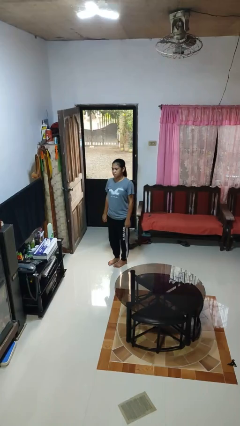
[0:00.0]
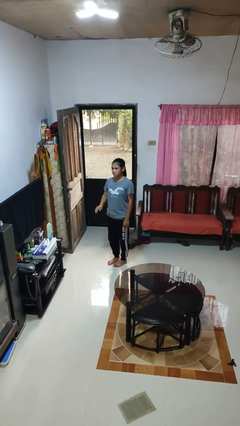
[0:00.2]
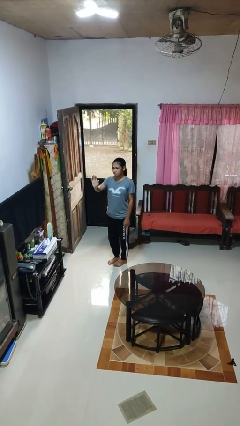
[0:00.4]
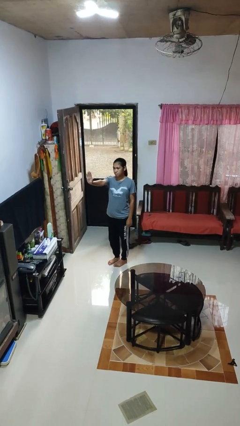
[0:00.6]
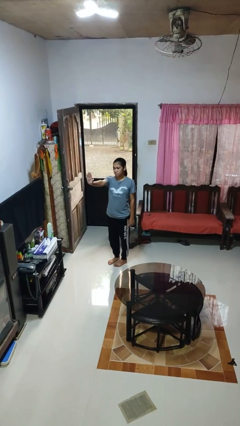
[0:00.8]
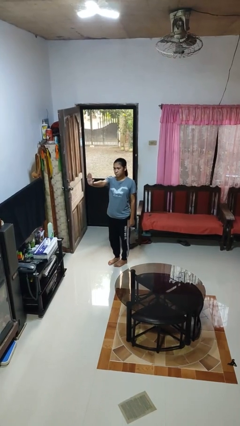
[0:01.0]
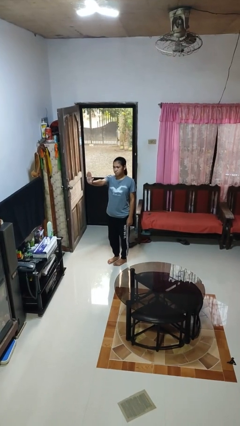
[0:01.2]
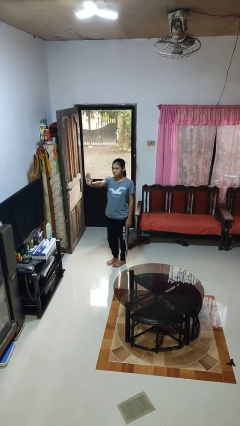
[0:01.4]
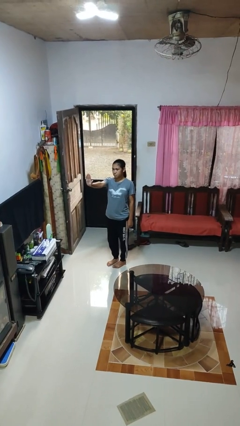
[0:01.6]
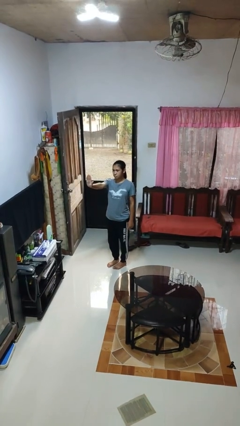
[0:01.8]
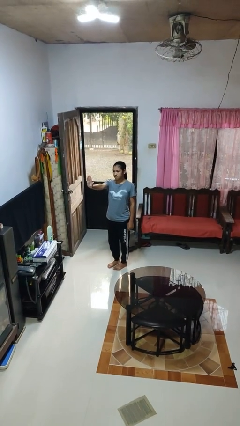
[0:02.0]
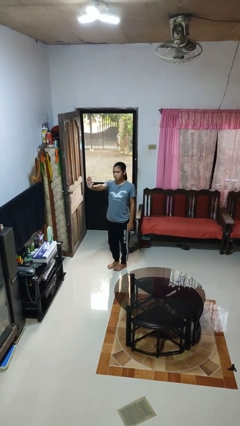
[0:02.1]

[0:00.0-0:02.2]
person gestures stop

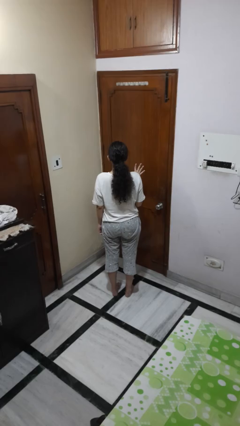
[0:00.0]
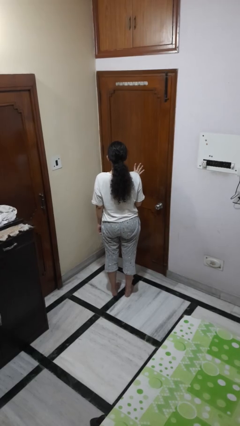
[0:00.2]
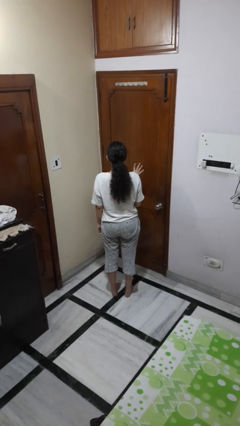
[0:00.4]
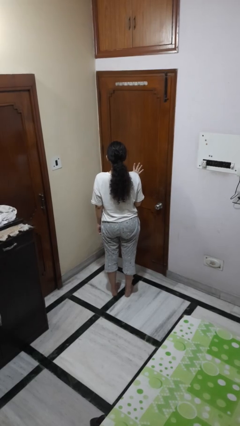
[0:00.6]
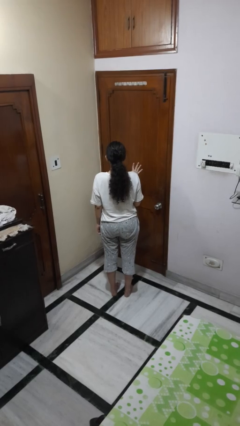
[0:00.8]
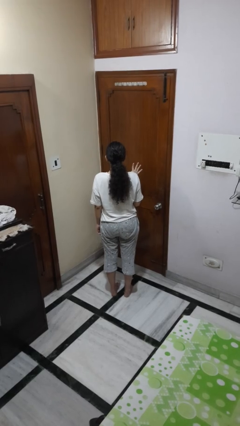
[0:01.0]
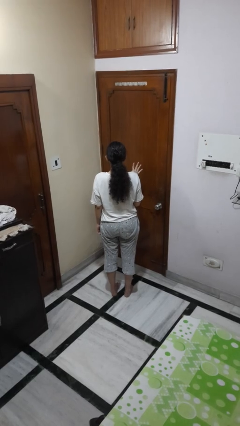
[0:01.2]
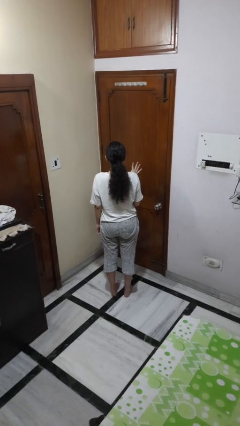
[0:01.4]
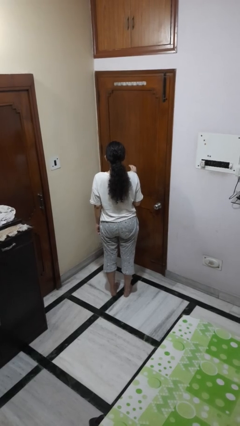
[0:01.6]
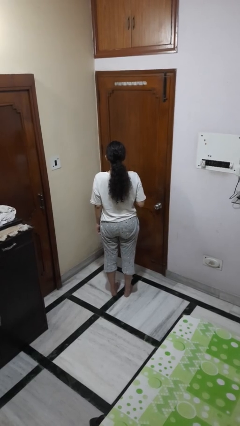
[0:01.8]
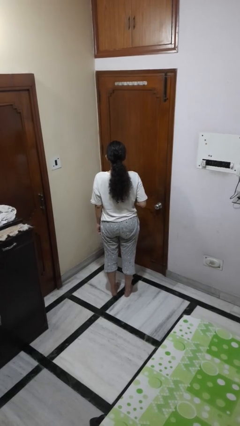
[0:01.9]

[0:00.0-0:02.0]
person gestures number four

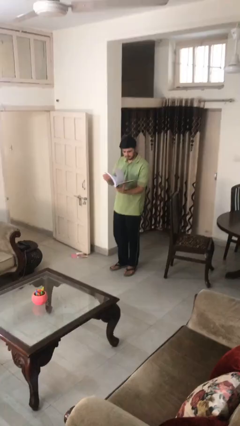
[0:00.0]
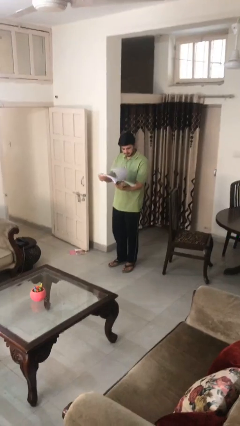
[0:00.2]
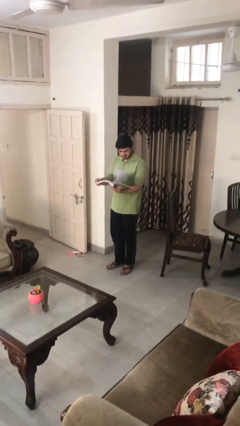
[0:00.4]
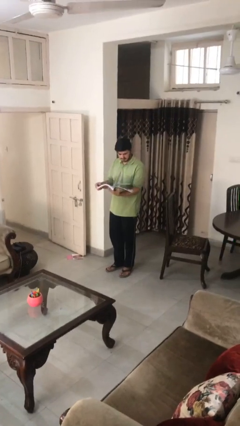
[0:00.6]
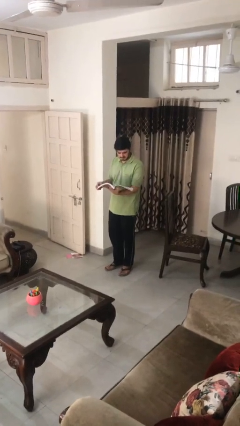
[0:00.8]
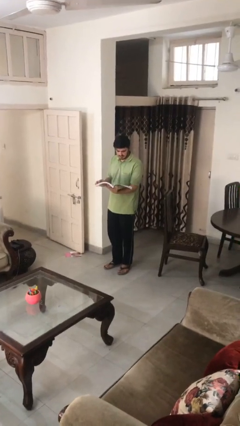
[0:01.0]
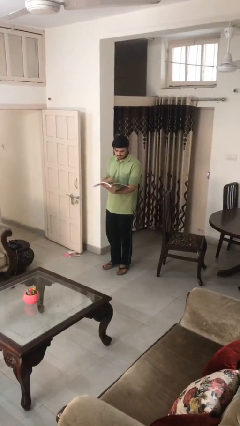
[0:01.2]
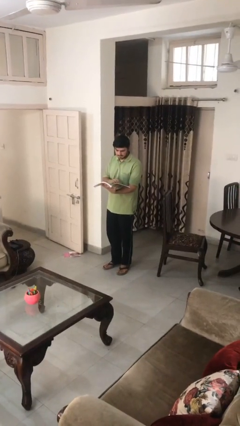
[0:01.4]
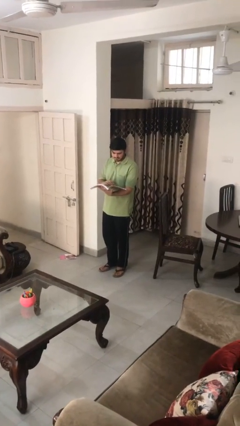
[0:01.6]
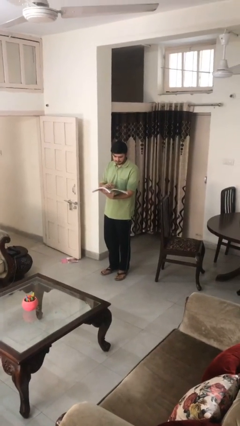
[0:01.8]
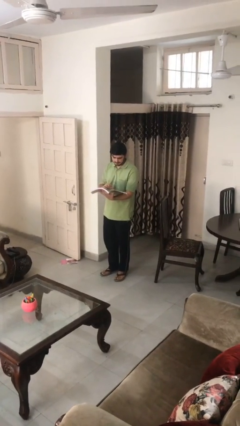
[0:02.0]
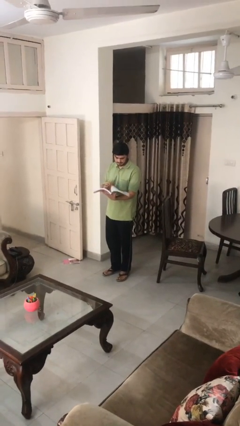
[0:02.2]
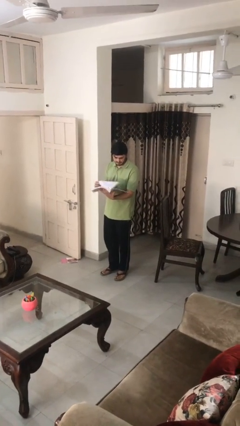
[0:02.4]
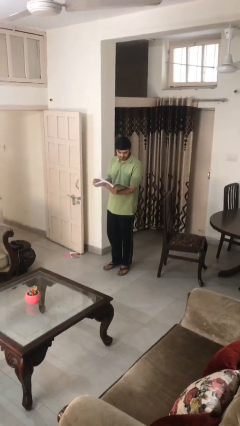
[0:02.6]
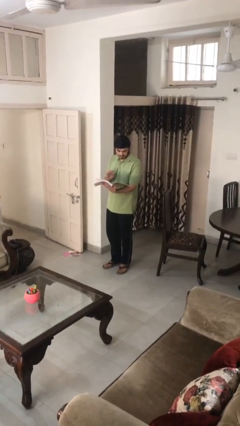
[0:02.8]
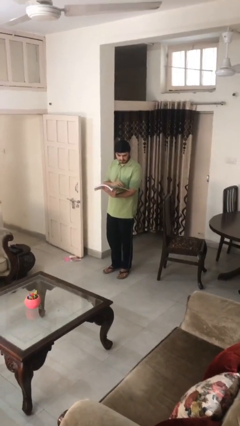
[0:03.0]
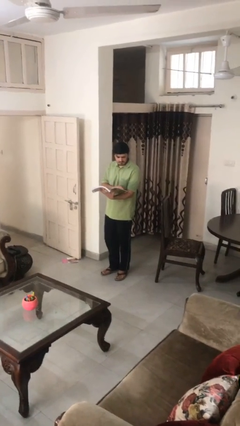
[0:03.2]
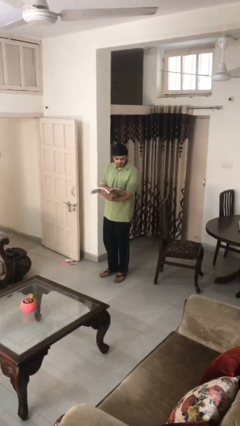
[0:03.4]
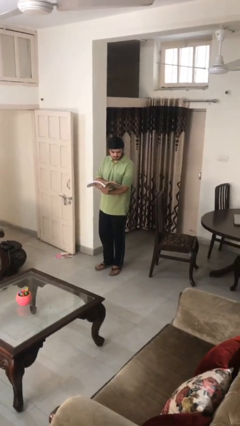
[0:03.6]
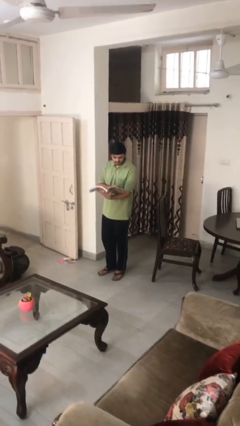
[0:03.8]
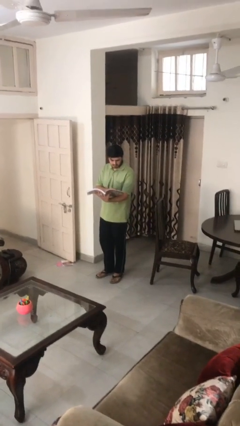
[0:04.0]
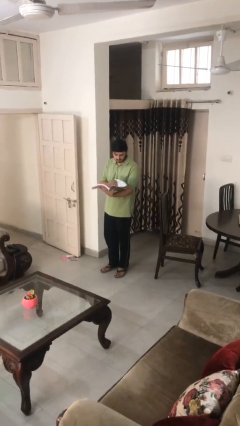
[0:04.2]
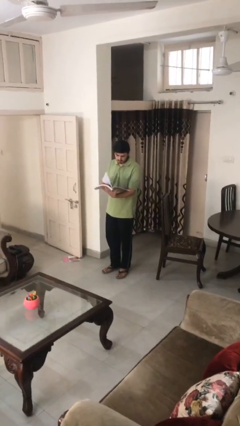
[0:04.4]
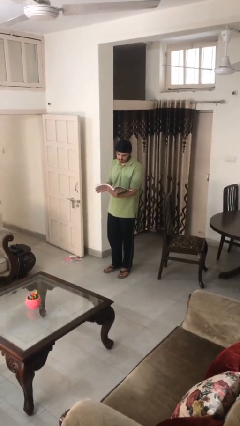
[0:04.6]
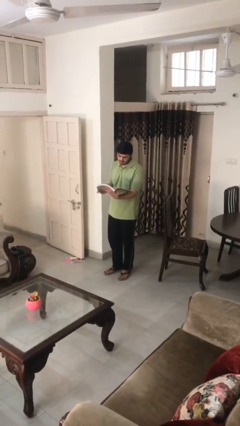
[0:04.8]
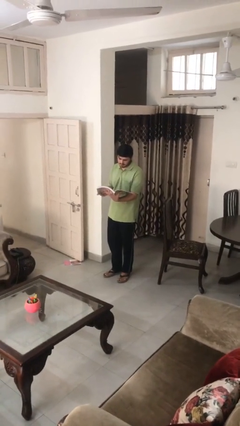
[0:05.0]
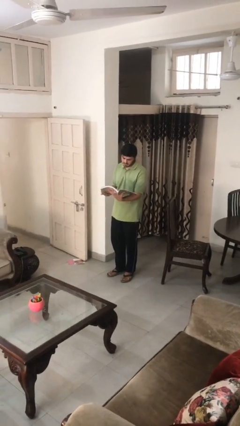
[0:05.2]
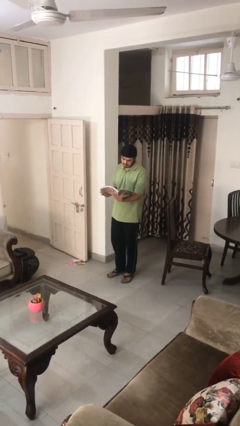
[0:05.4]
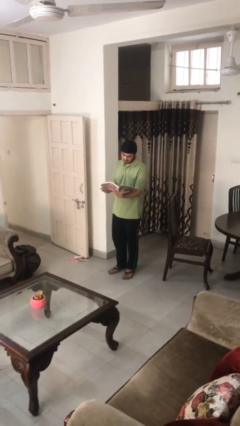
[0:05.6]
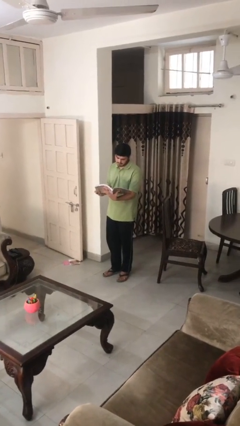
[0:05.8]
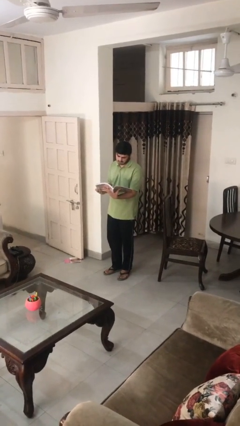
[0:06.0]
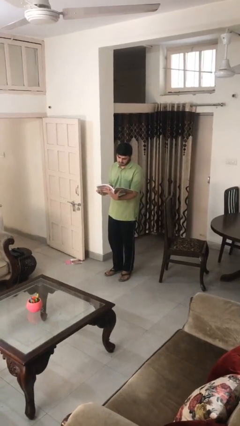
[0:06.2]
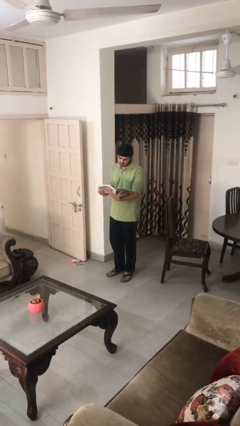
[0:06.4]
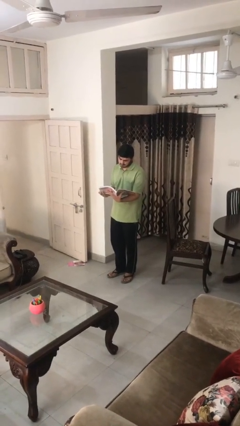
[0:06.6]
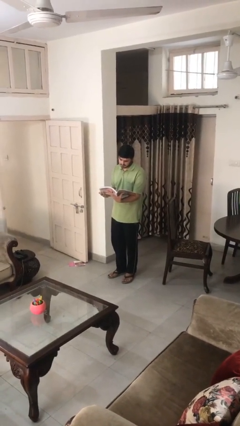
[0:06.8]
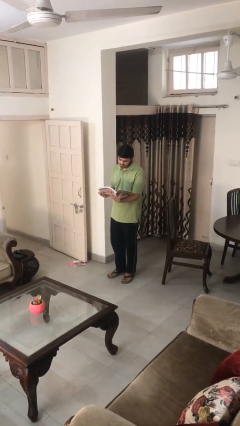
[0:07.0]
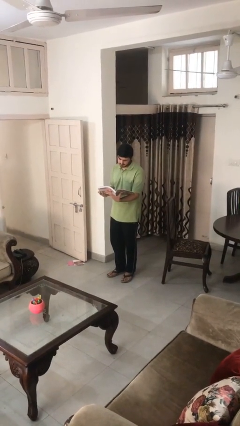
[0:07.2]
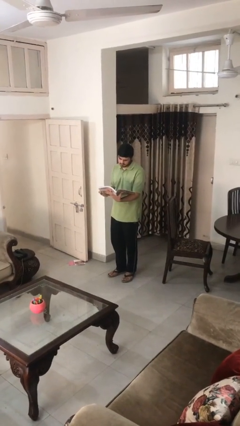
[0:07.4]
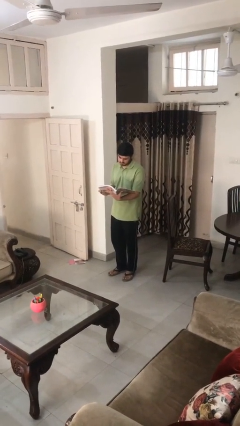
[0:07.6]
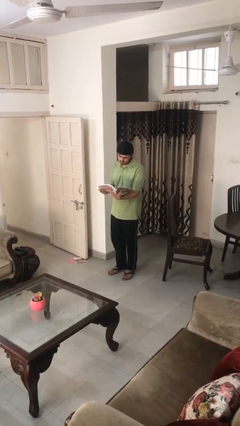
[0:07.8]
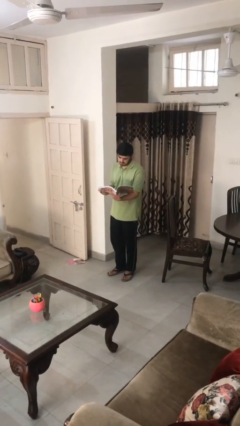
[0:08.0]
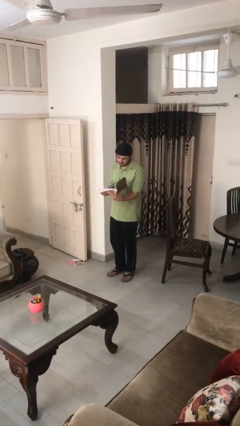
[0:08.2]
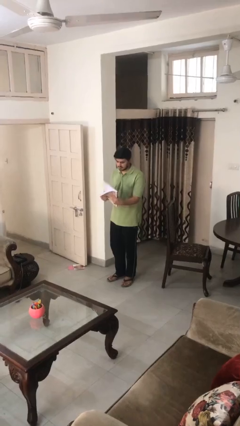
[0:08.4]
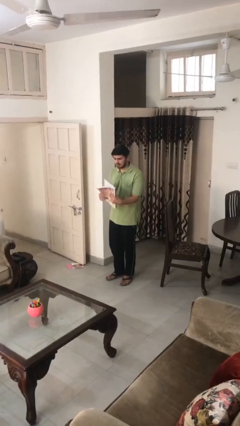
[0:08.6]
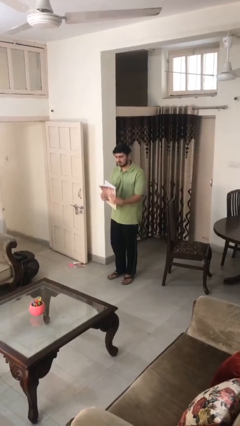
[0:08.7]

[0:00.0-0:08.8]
person reads document

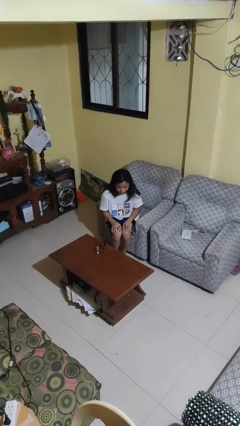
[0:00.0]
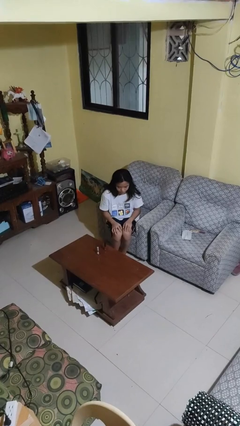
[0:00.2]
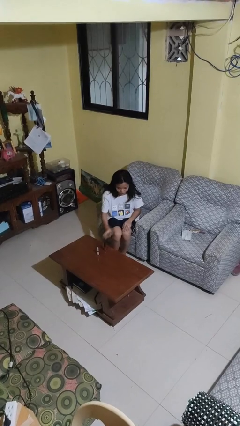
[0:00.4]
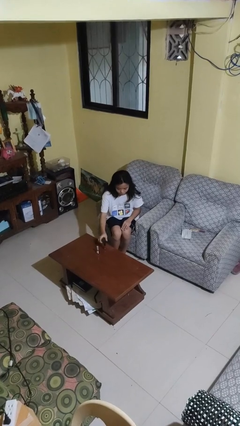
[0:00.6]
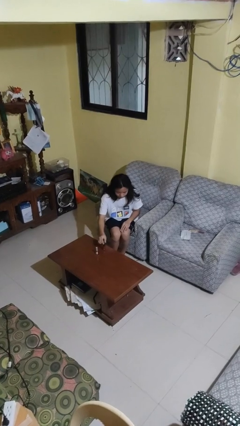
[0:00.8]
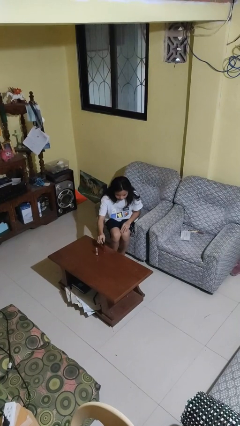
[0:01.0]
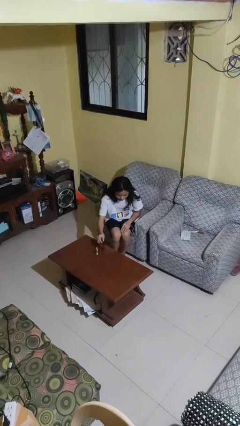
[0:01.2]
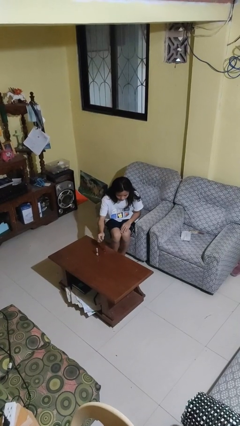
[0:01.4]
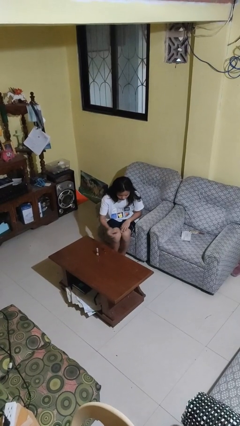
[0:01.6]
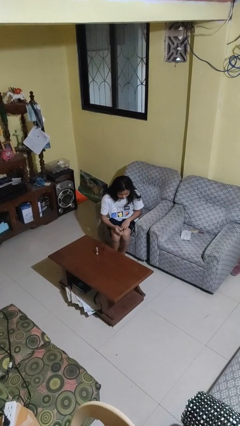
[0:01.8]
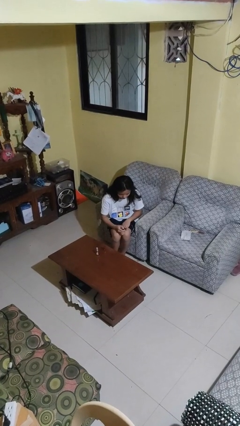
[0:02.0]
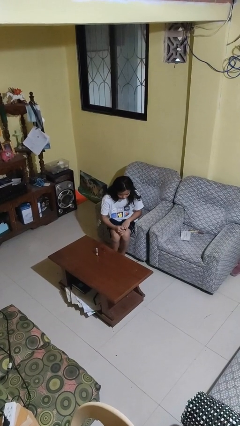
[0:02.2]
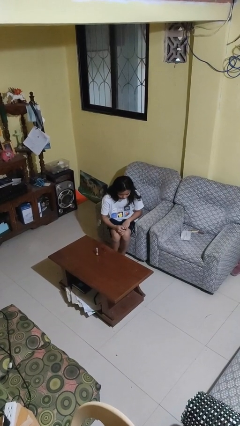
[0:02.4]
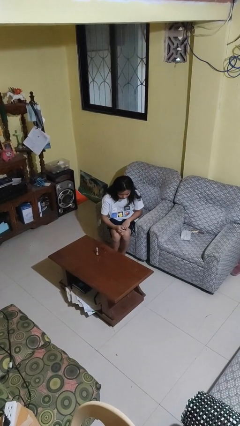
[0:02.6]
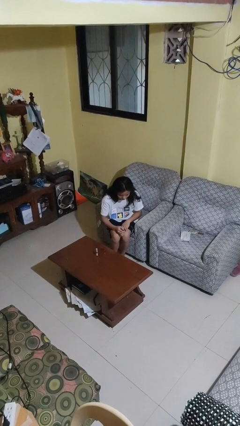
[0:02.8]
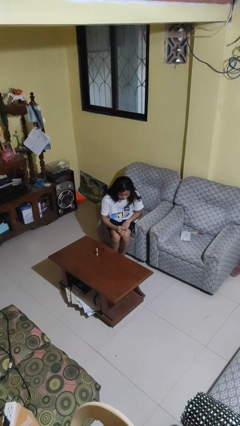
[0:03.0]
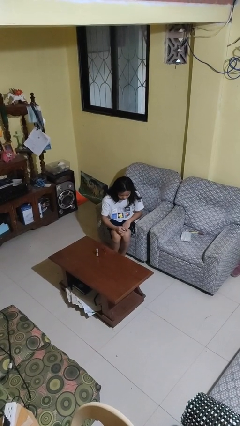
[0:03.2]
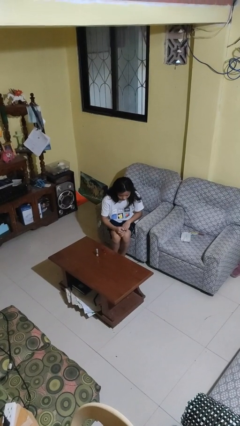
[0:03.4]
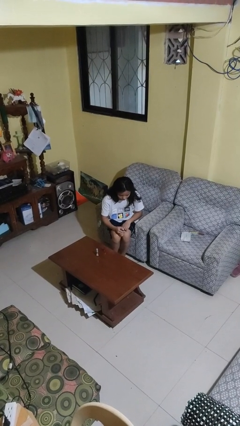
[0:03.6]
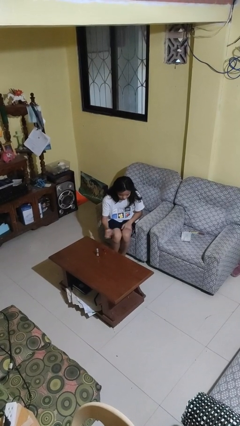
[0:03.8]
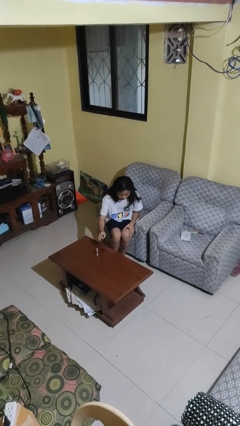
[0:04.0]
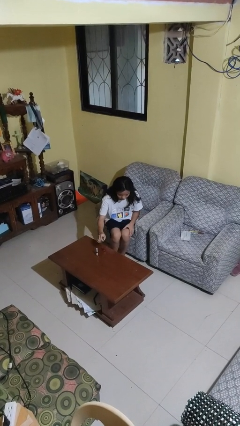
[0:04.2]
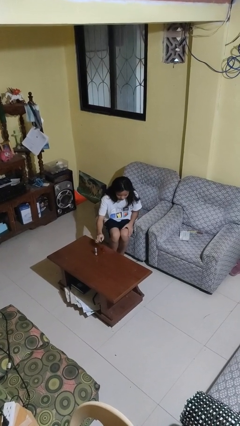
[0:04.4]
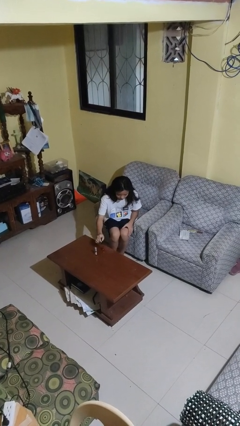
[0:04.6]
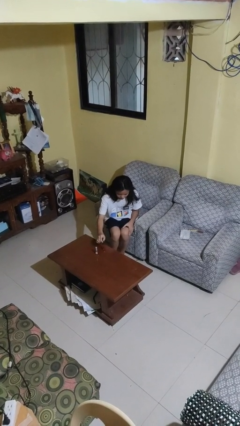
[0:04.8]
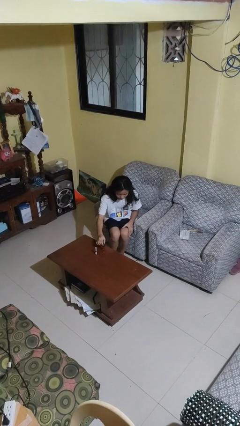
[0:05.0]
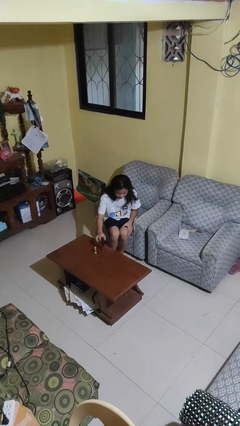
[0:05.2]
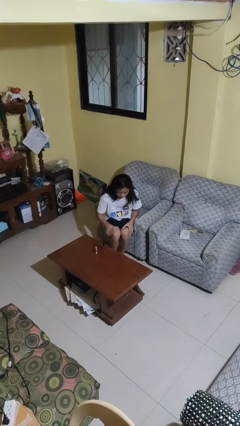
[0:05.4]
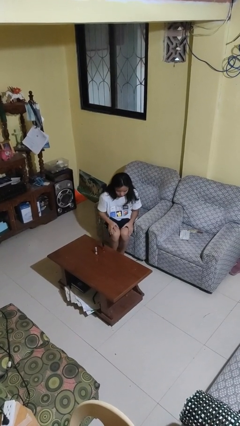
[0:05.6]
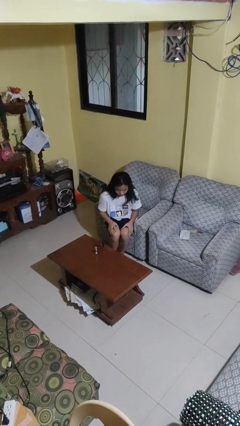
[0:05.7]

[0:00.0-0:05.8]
person paints fingernails
